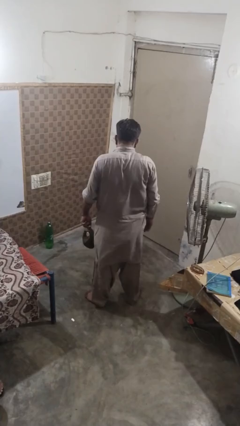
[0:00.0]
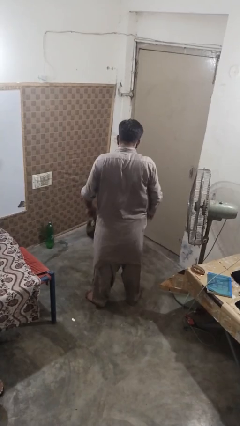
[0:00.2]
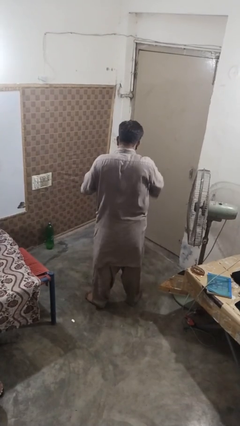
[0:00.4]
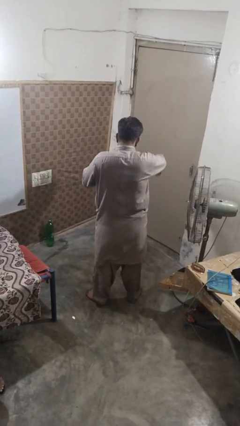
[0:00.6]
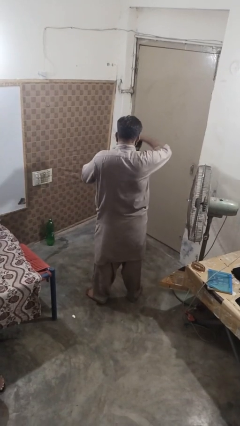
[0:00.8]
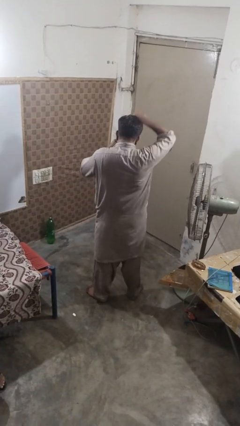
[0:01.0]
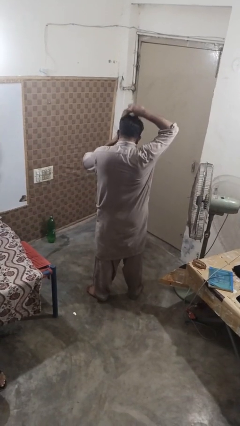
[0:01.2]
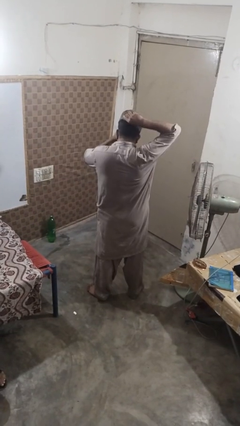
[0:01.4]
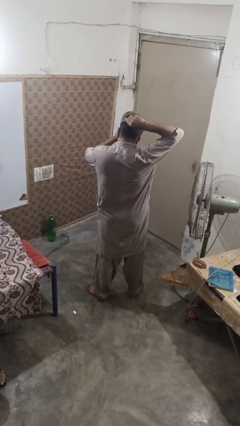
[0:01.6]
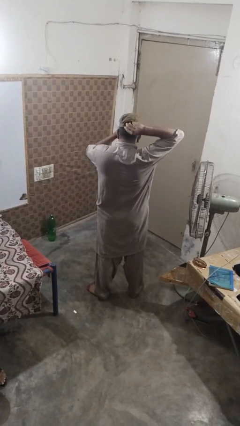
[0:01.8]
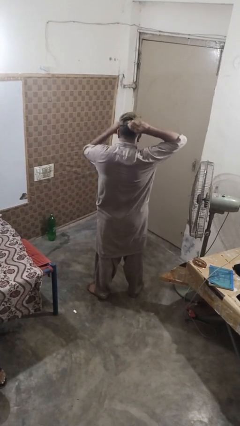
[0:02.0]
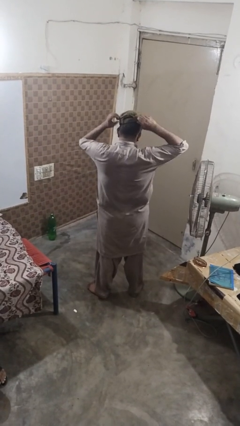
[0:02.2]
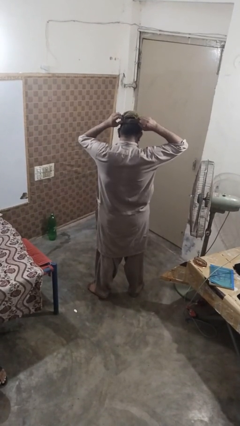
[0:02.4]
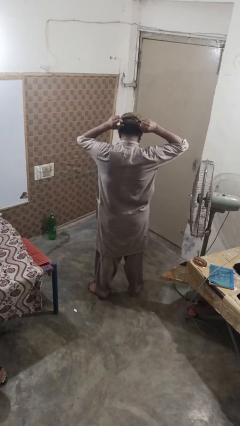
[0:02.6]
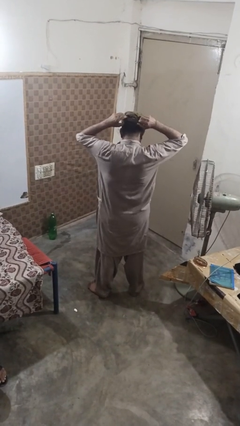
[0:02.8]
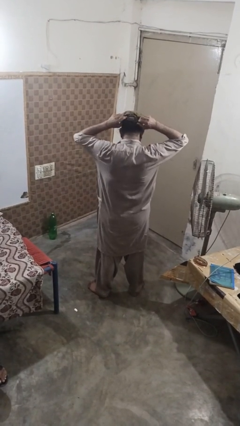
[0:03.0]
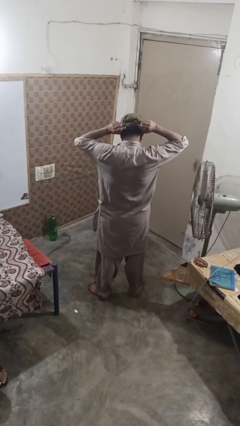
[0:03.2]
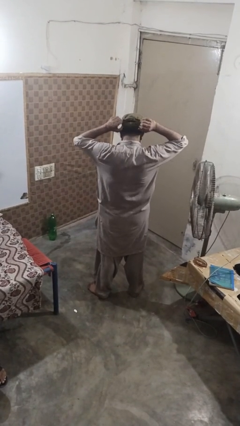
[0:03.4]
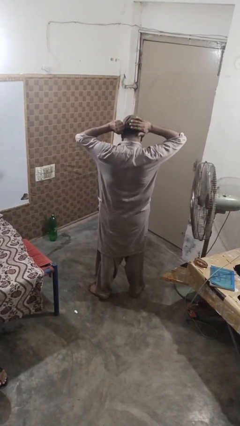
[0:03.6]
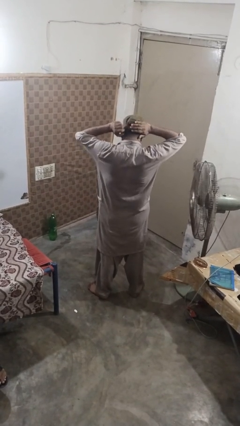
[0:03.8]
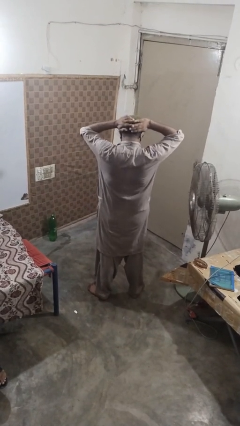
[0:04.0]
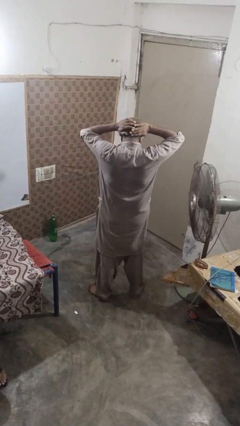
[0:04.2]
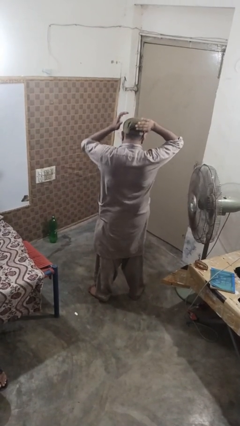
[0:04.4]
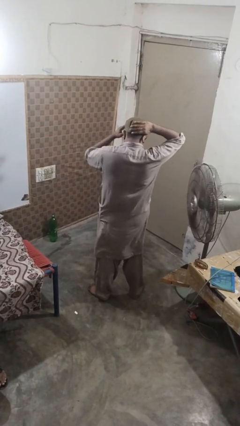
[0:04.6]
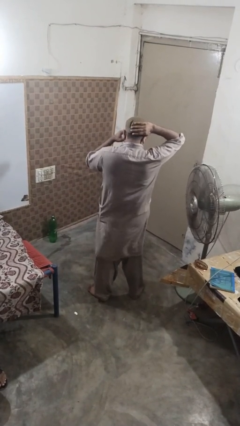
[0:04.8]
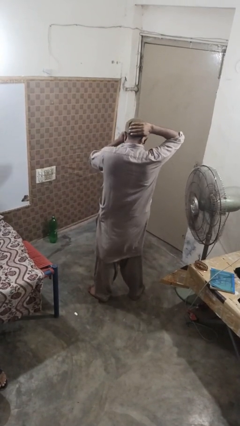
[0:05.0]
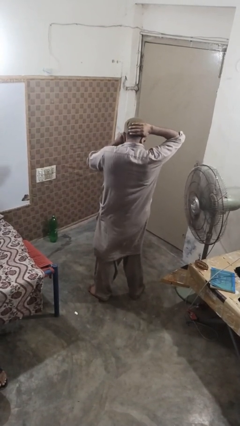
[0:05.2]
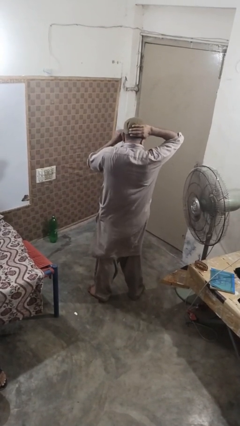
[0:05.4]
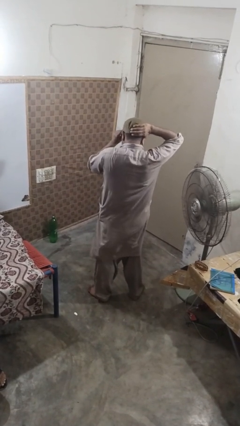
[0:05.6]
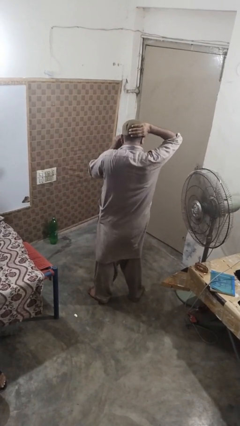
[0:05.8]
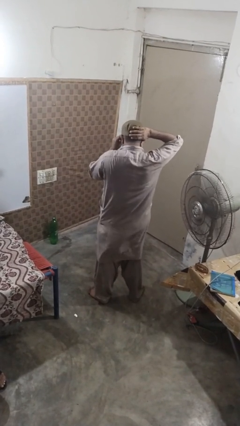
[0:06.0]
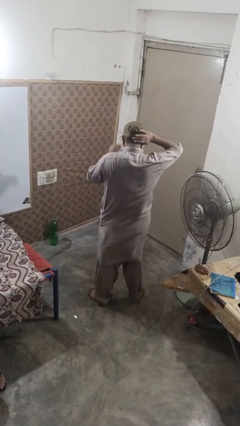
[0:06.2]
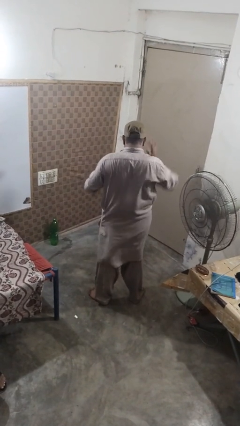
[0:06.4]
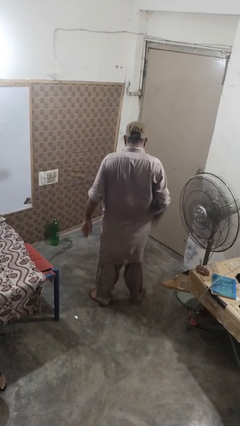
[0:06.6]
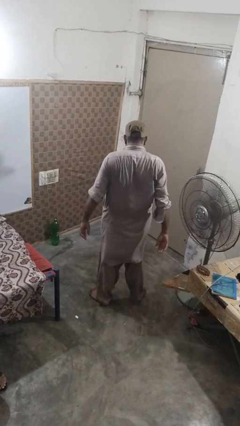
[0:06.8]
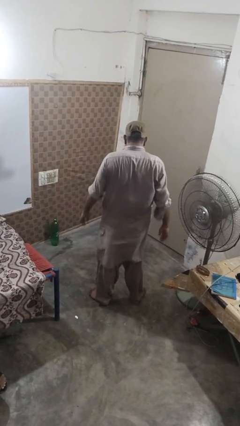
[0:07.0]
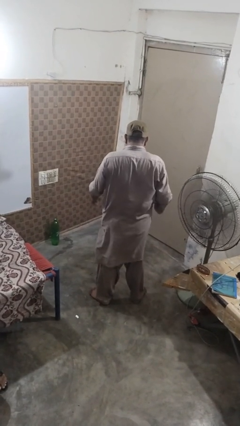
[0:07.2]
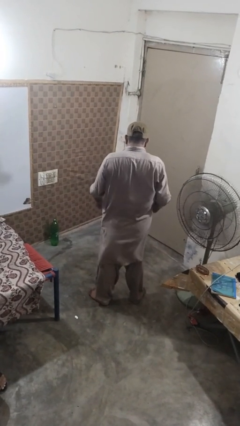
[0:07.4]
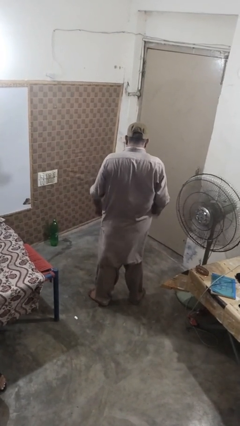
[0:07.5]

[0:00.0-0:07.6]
person puts on hat

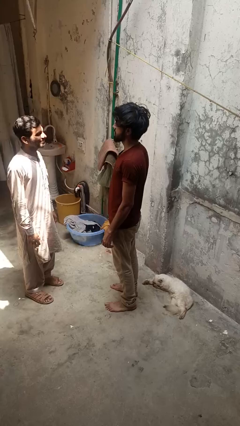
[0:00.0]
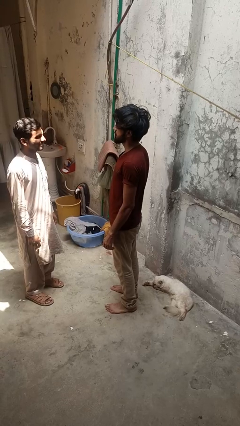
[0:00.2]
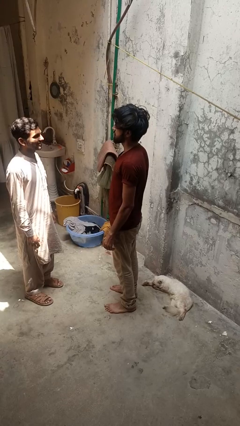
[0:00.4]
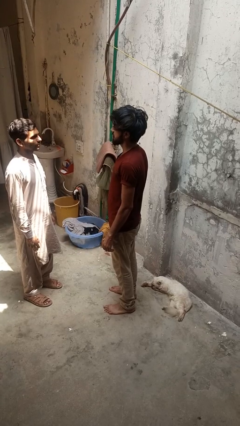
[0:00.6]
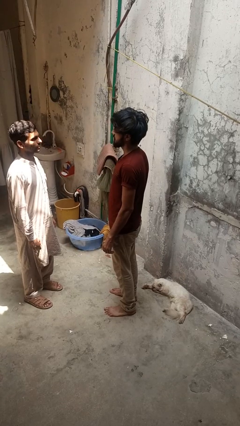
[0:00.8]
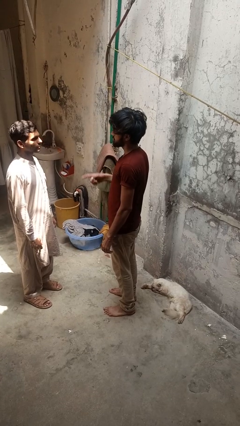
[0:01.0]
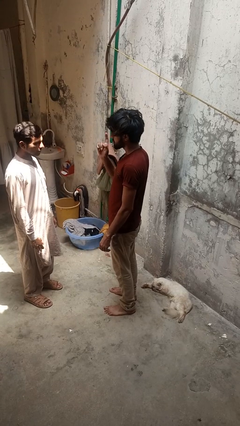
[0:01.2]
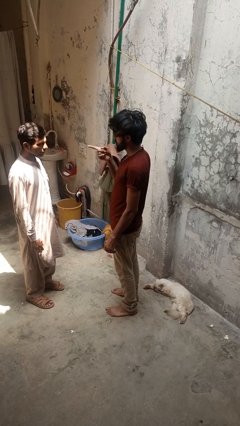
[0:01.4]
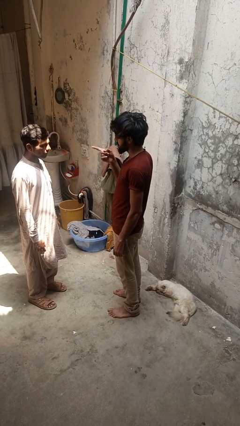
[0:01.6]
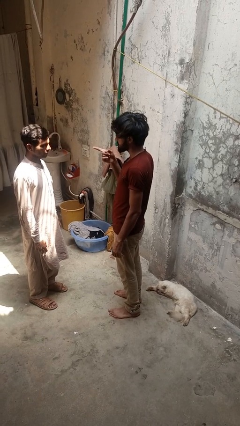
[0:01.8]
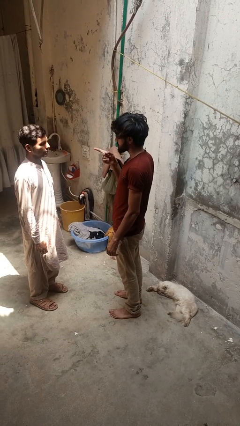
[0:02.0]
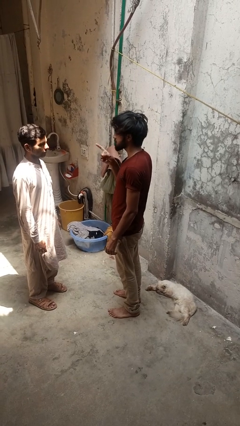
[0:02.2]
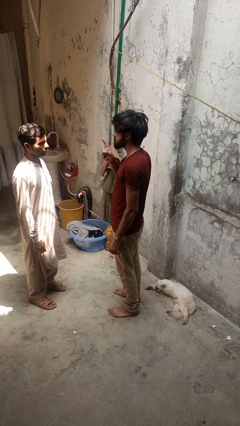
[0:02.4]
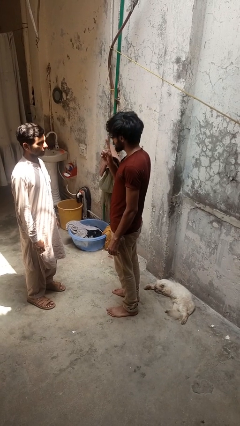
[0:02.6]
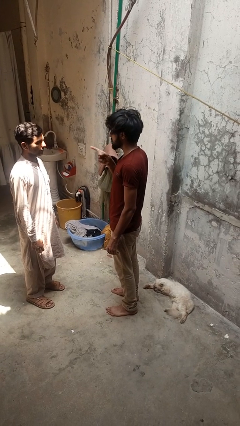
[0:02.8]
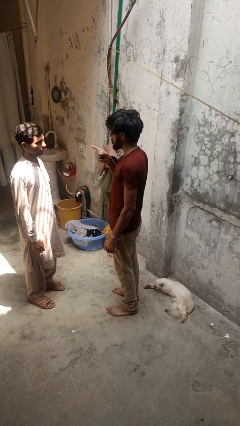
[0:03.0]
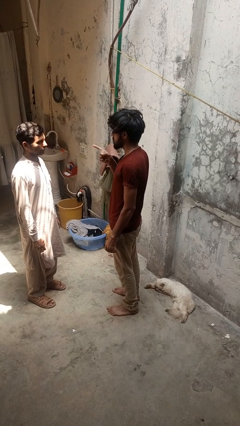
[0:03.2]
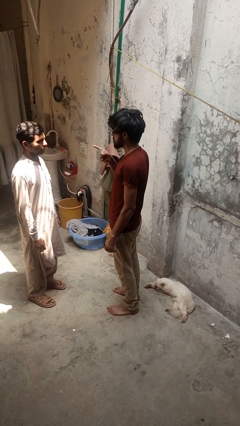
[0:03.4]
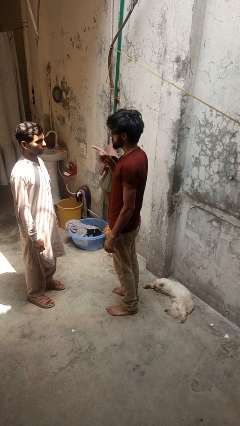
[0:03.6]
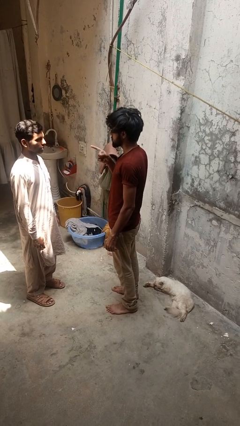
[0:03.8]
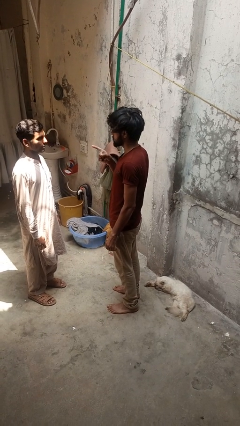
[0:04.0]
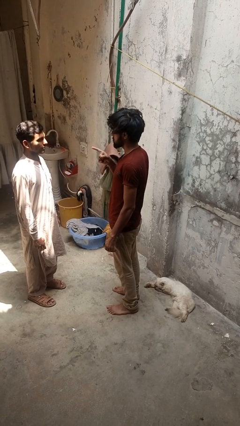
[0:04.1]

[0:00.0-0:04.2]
person points at person

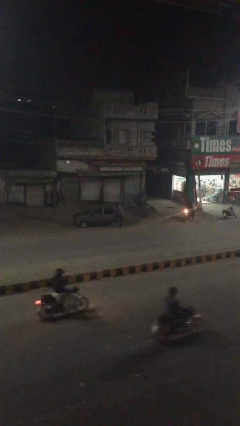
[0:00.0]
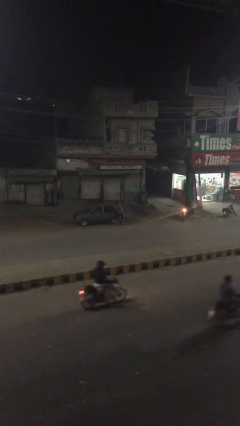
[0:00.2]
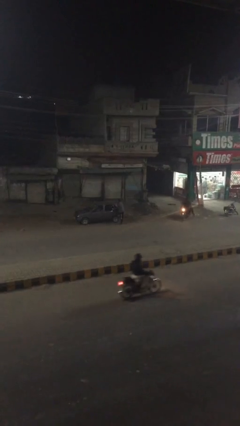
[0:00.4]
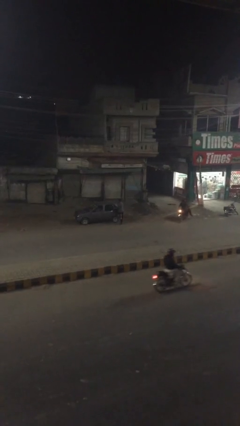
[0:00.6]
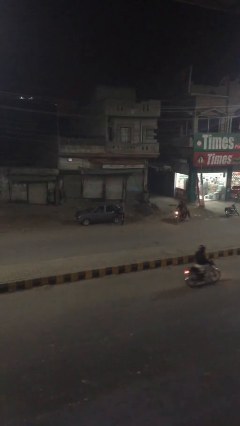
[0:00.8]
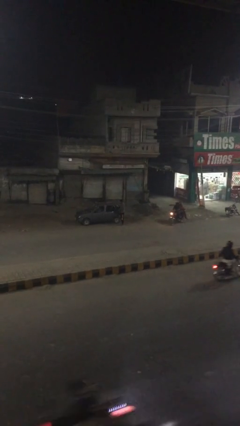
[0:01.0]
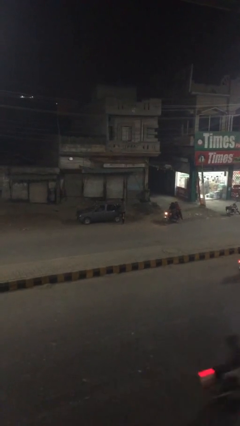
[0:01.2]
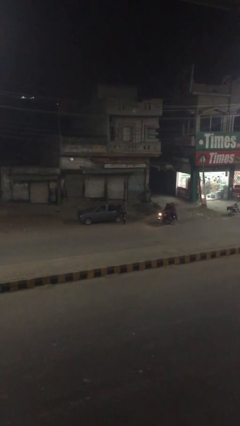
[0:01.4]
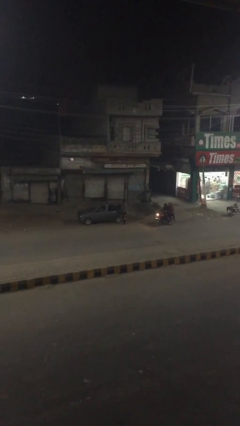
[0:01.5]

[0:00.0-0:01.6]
person closes car door

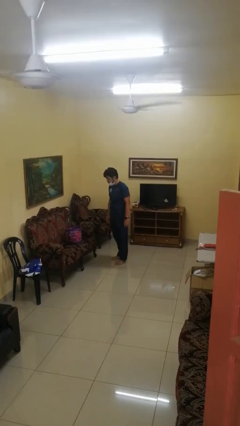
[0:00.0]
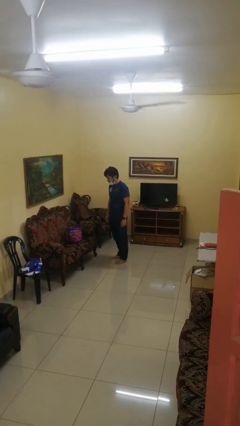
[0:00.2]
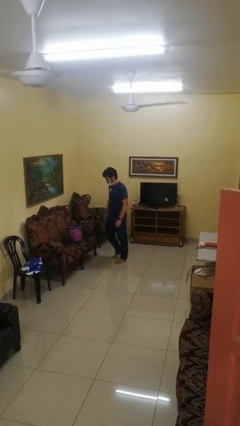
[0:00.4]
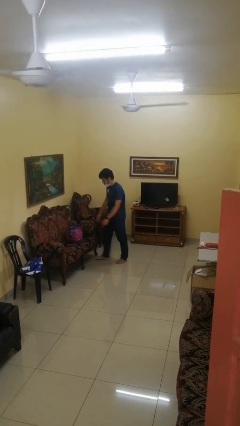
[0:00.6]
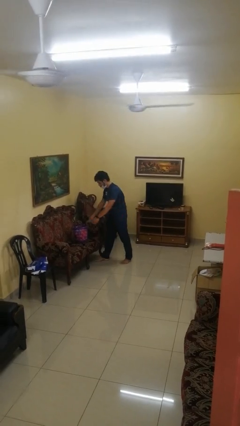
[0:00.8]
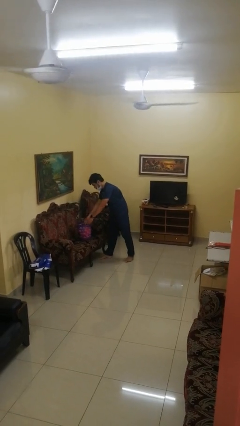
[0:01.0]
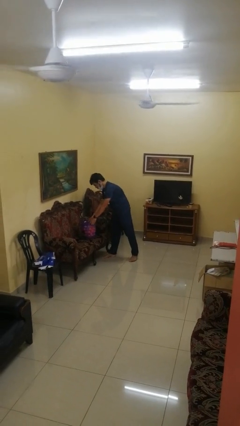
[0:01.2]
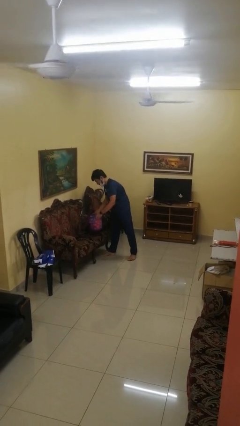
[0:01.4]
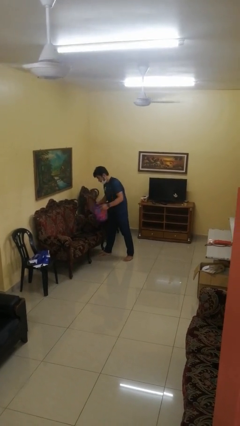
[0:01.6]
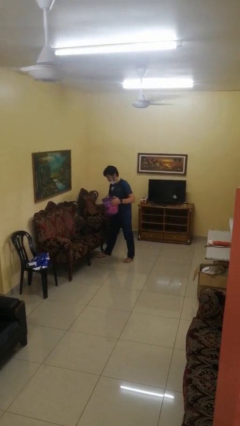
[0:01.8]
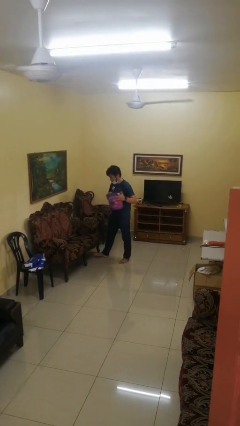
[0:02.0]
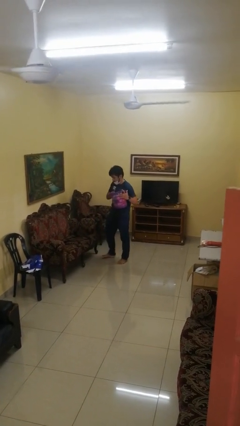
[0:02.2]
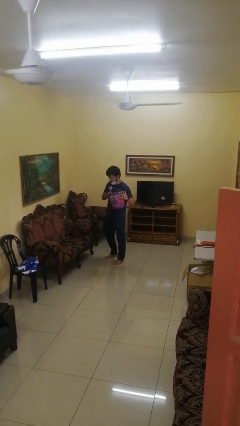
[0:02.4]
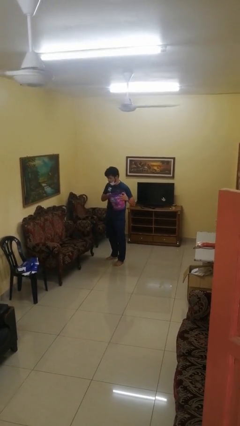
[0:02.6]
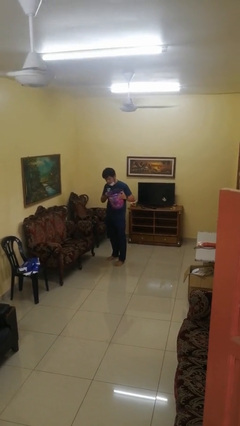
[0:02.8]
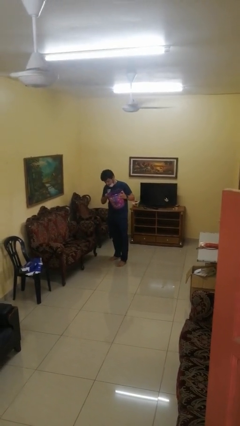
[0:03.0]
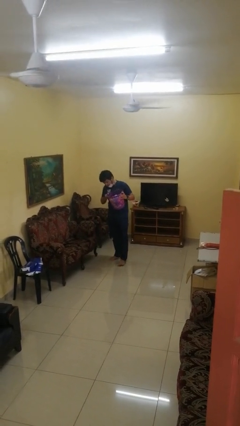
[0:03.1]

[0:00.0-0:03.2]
person picks up object from couch

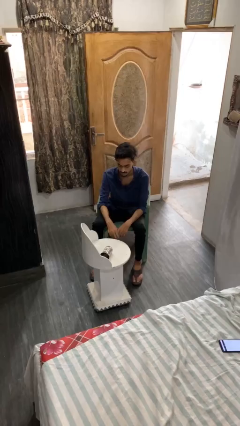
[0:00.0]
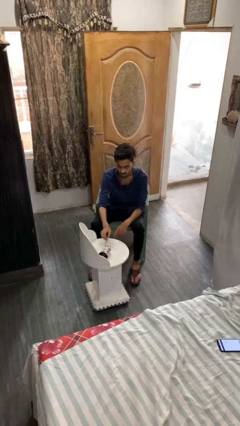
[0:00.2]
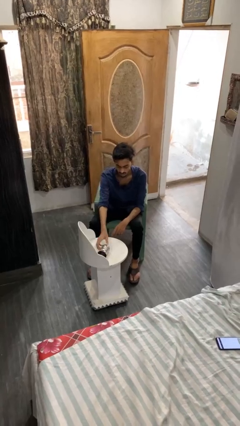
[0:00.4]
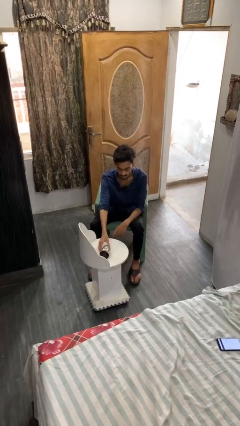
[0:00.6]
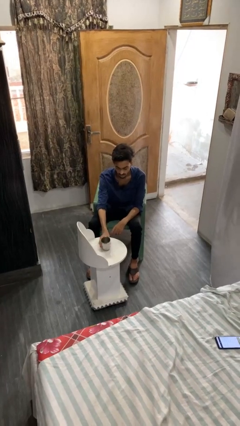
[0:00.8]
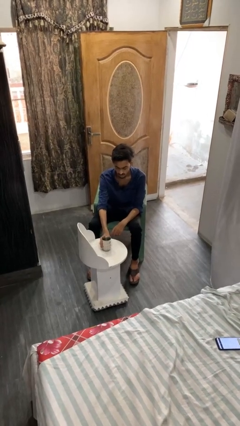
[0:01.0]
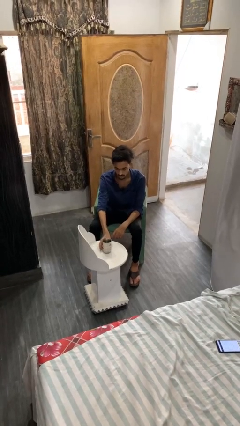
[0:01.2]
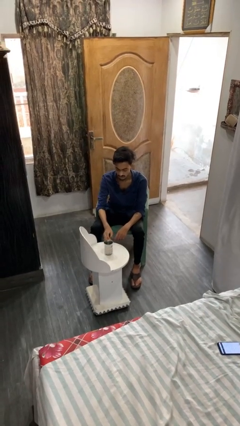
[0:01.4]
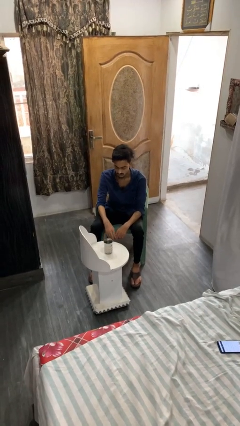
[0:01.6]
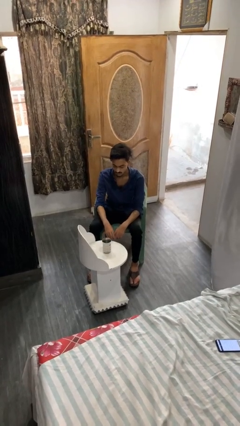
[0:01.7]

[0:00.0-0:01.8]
person sets upright glass
